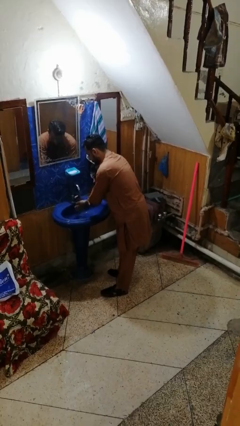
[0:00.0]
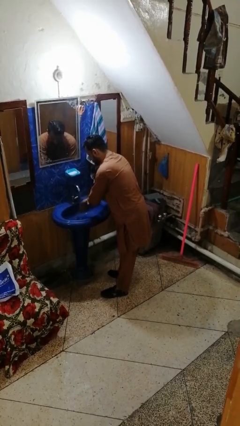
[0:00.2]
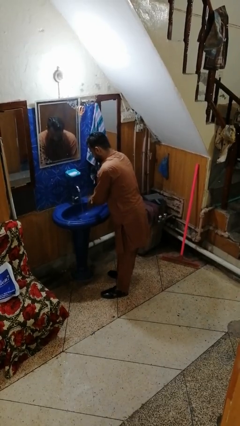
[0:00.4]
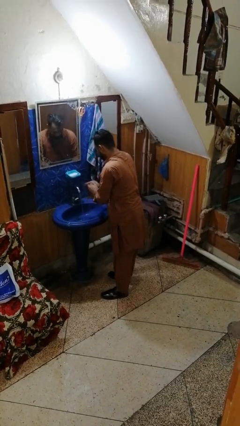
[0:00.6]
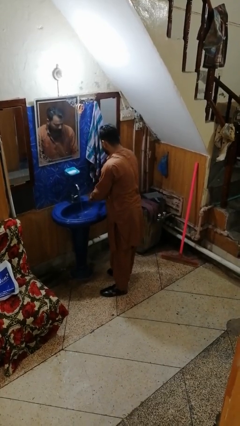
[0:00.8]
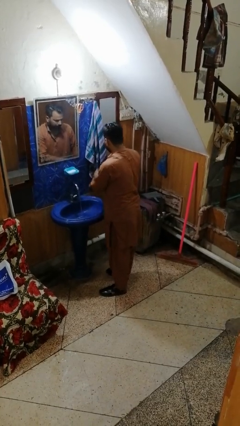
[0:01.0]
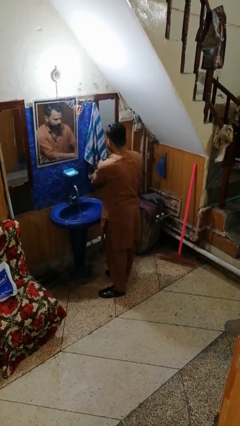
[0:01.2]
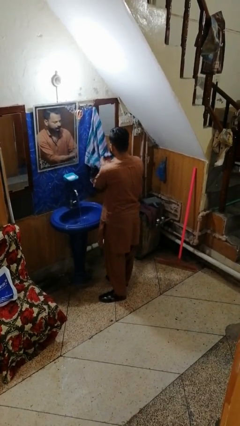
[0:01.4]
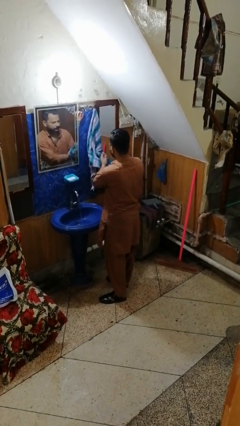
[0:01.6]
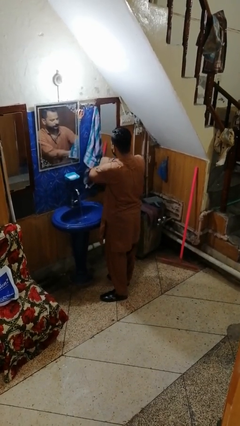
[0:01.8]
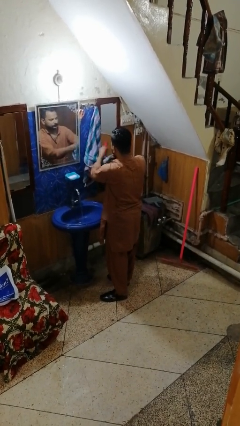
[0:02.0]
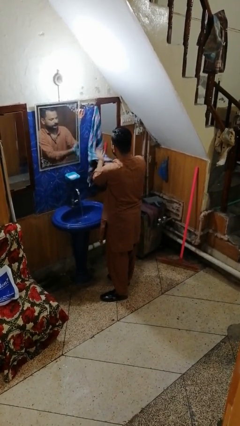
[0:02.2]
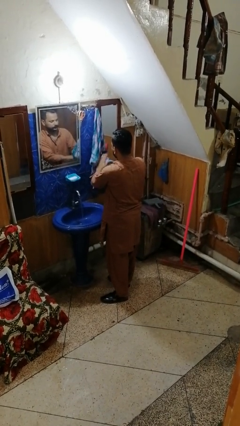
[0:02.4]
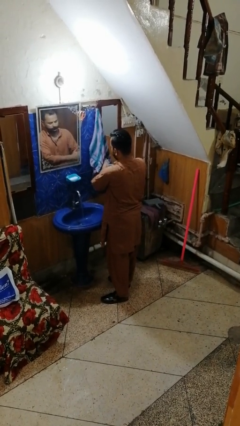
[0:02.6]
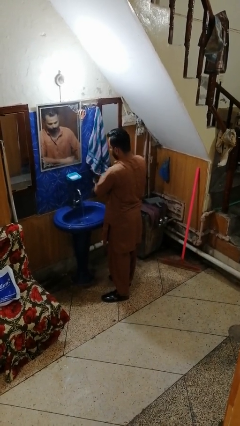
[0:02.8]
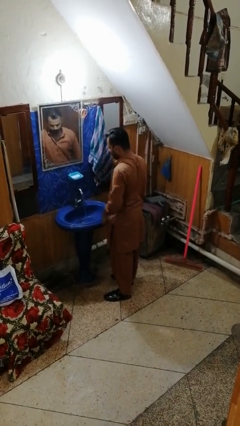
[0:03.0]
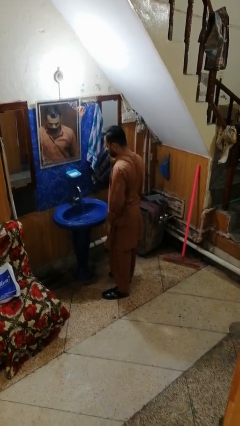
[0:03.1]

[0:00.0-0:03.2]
person dries hands with towel

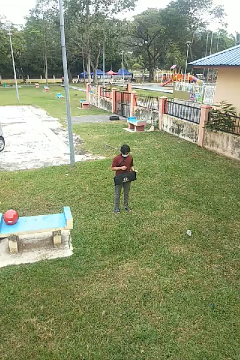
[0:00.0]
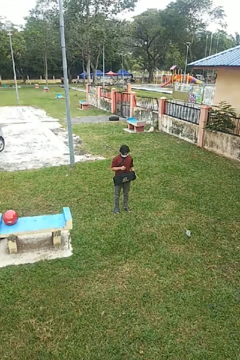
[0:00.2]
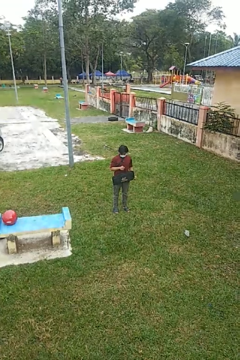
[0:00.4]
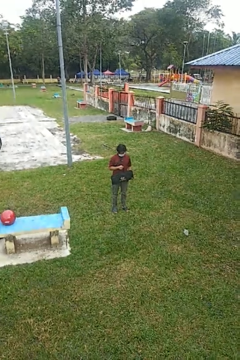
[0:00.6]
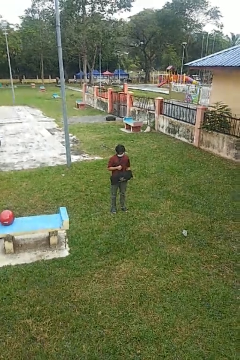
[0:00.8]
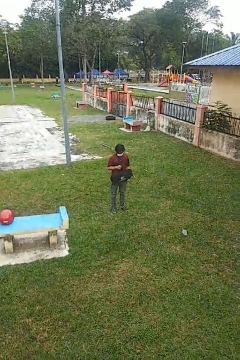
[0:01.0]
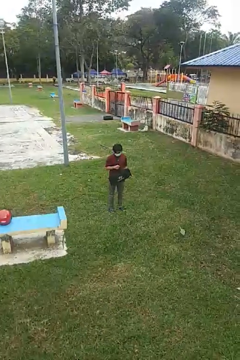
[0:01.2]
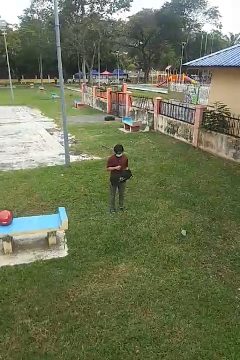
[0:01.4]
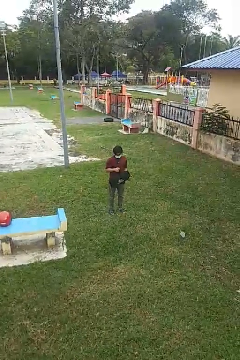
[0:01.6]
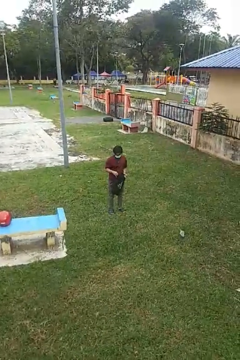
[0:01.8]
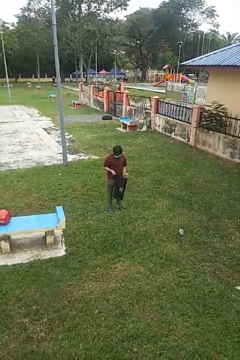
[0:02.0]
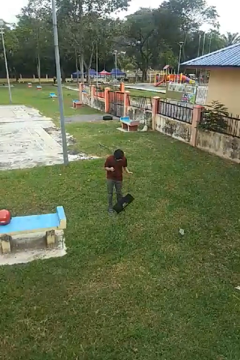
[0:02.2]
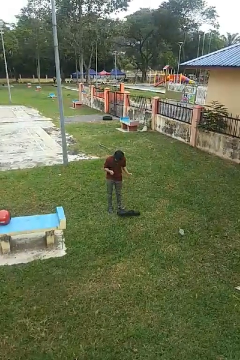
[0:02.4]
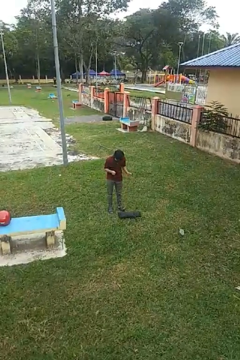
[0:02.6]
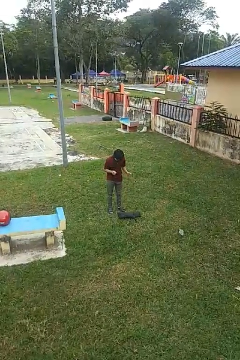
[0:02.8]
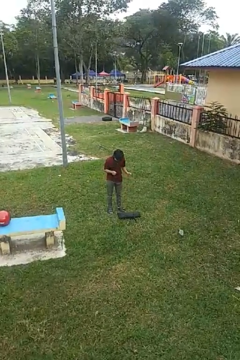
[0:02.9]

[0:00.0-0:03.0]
person drops object

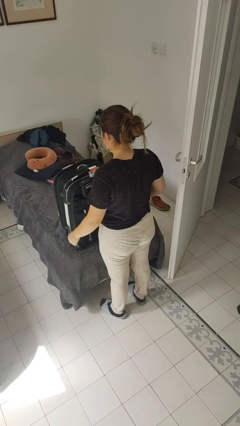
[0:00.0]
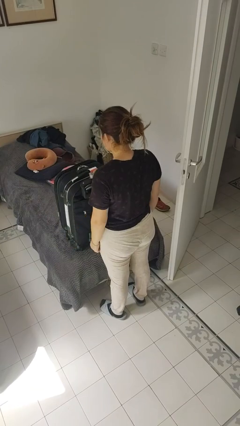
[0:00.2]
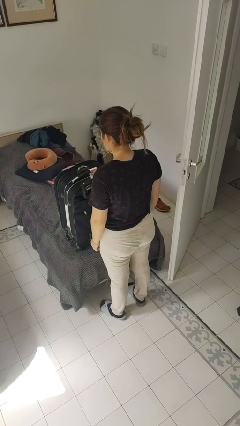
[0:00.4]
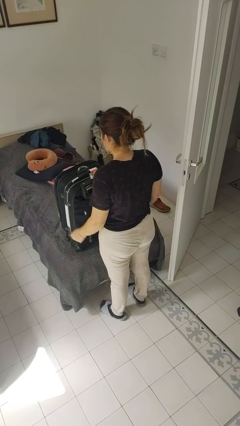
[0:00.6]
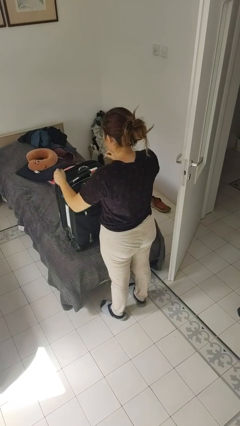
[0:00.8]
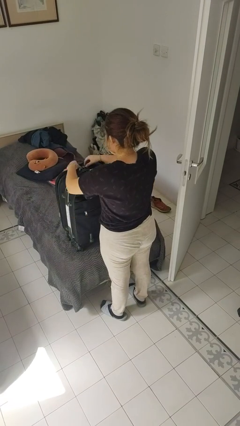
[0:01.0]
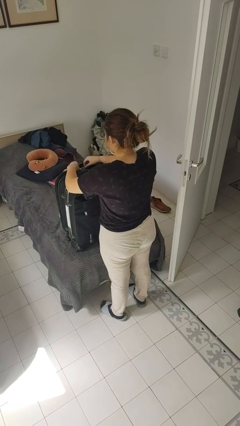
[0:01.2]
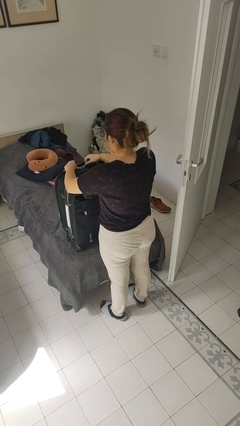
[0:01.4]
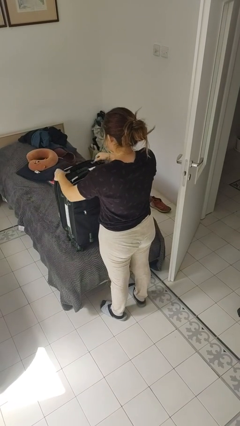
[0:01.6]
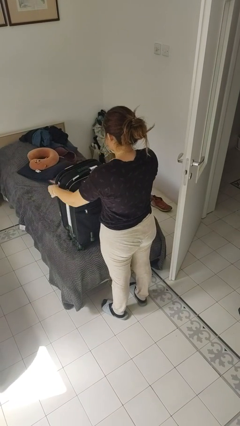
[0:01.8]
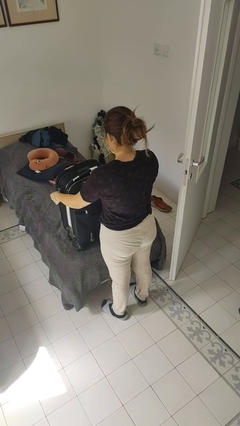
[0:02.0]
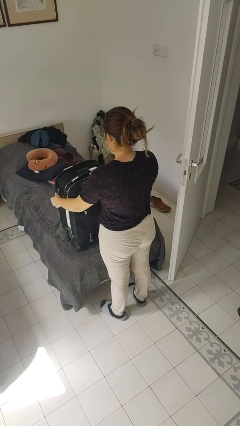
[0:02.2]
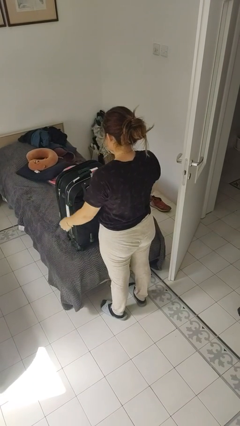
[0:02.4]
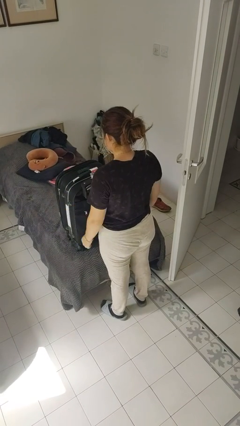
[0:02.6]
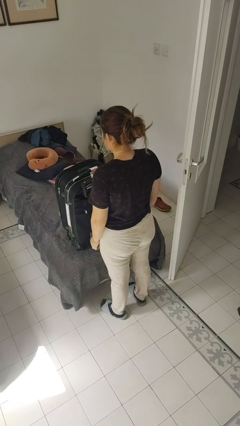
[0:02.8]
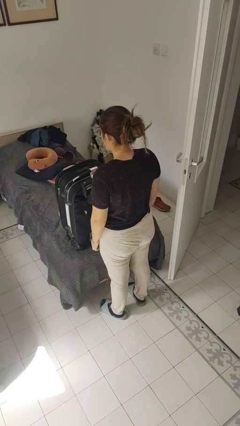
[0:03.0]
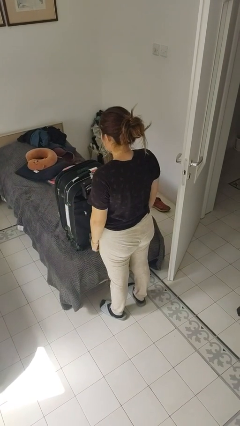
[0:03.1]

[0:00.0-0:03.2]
person opens suitcase

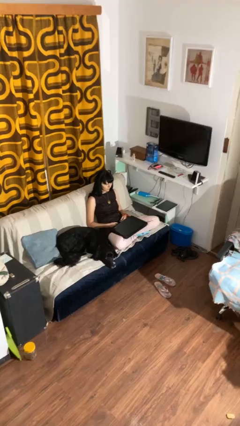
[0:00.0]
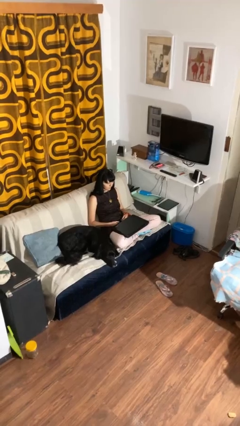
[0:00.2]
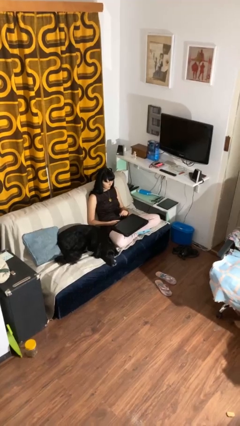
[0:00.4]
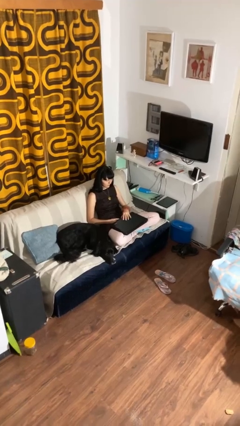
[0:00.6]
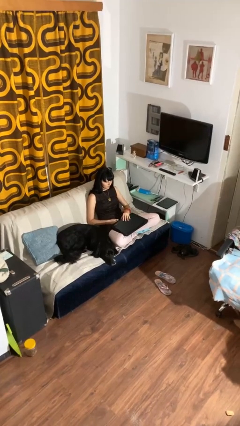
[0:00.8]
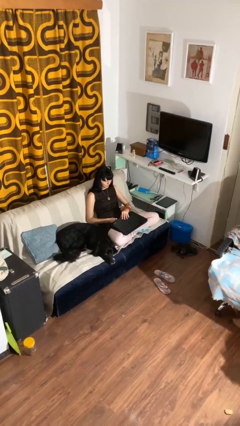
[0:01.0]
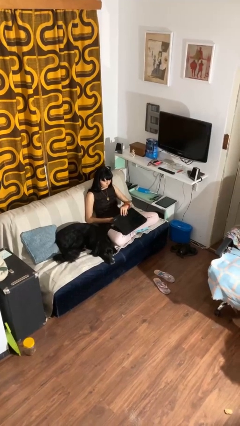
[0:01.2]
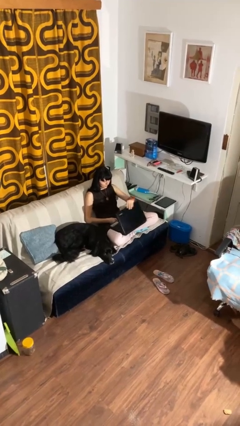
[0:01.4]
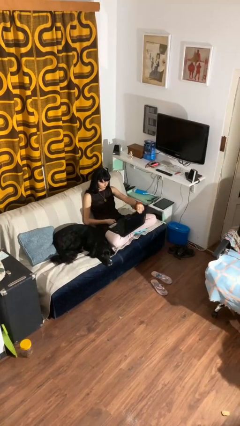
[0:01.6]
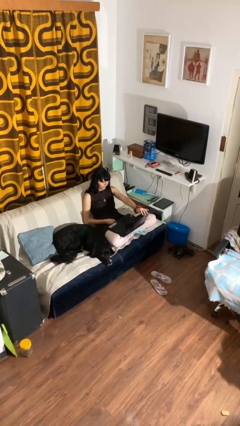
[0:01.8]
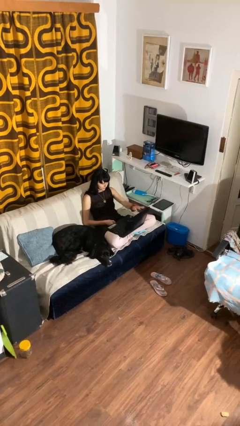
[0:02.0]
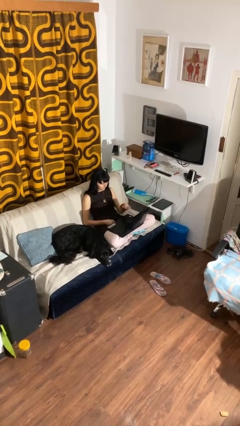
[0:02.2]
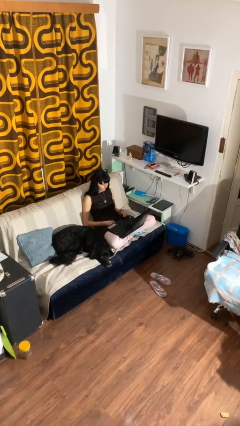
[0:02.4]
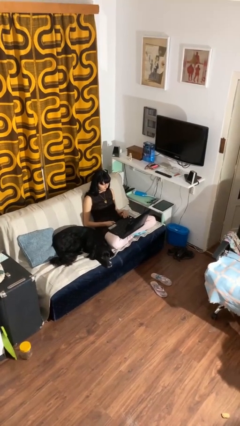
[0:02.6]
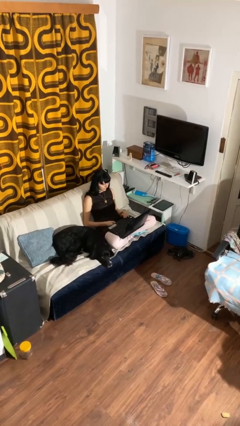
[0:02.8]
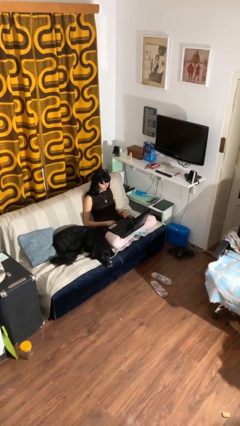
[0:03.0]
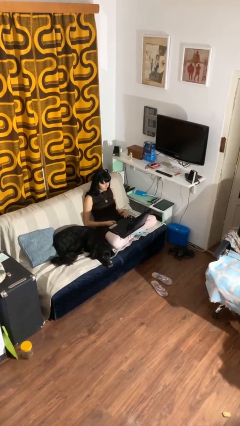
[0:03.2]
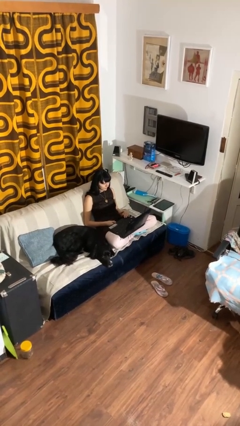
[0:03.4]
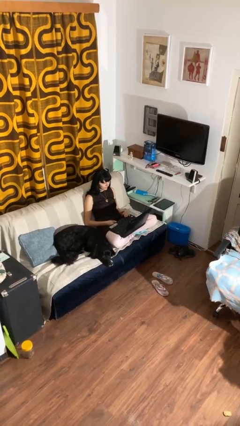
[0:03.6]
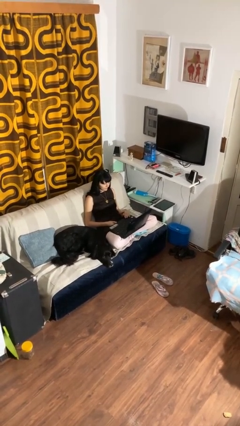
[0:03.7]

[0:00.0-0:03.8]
person opens laptop

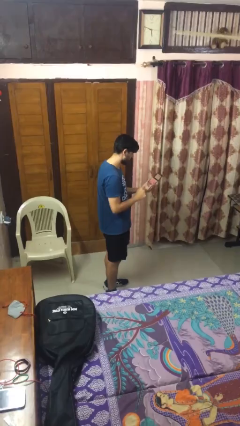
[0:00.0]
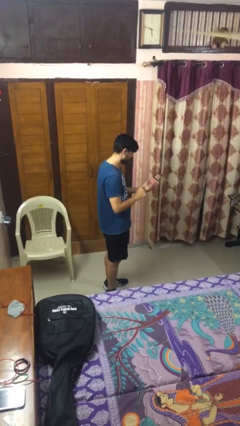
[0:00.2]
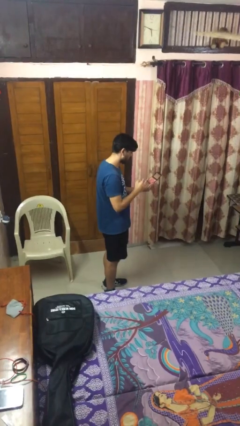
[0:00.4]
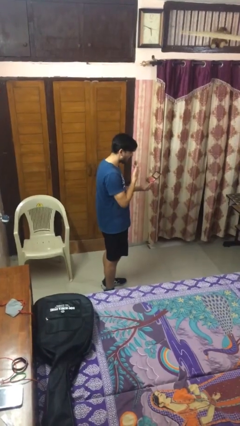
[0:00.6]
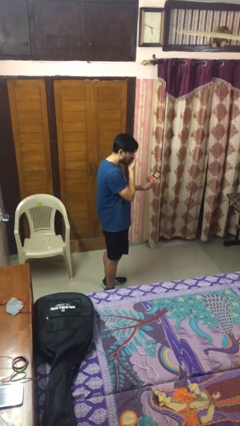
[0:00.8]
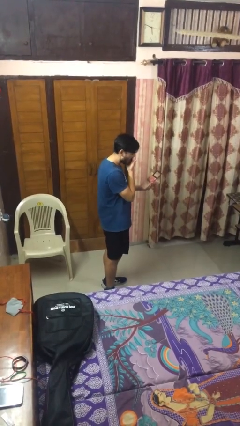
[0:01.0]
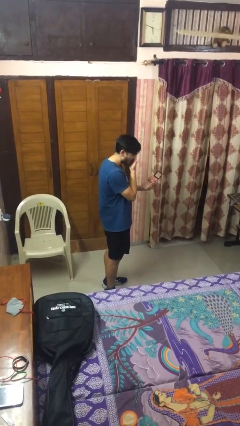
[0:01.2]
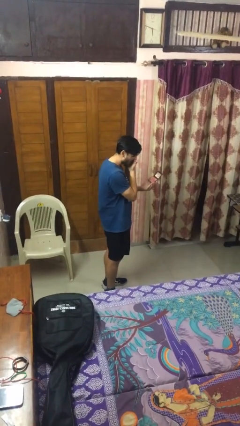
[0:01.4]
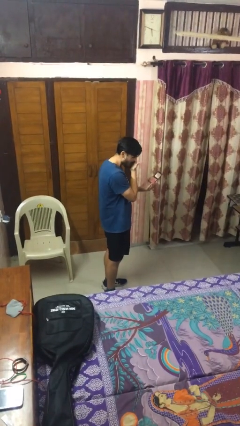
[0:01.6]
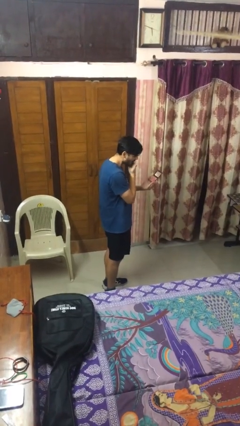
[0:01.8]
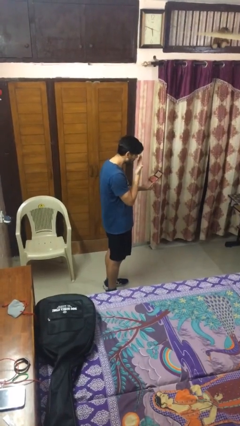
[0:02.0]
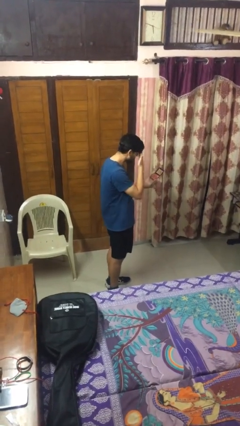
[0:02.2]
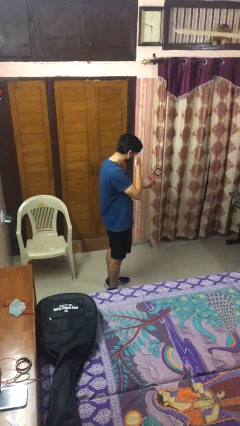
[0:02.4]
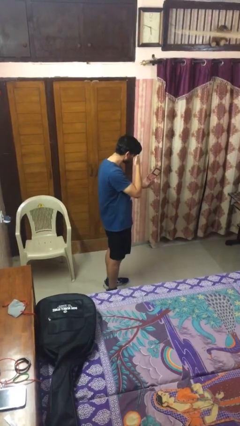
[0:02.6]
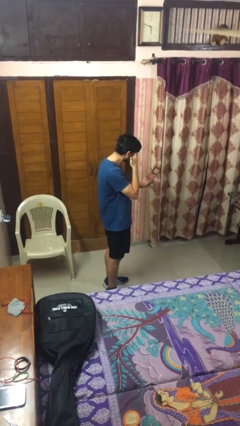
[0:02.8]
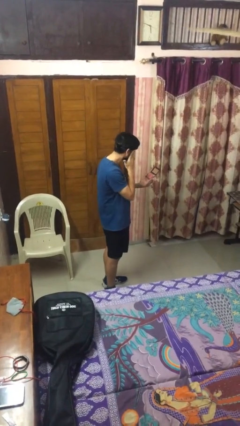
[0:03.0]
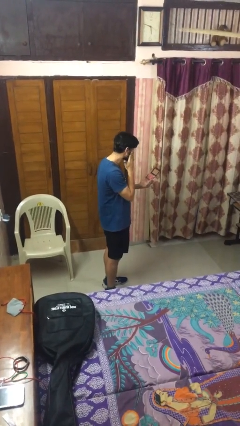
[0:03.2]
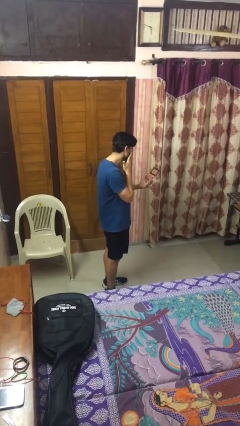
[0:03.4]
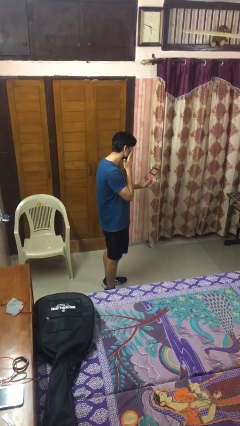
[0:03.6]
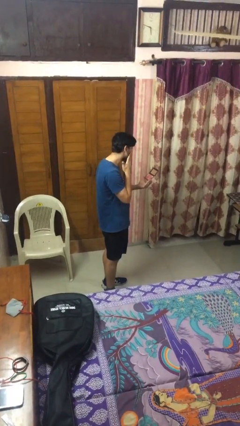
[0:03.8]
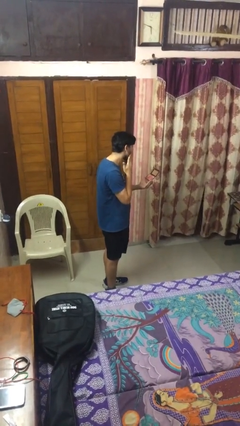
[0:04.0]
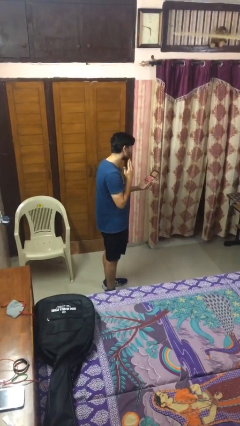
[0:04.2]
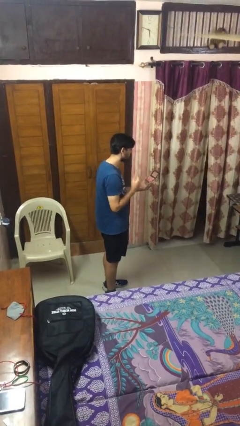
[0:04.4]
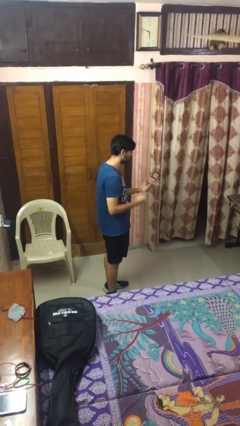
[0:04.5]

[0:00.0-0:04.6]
person applies foundation makeup

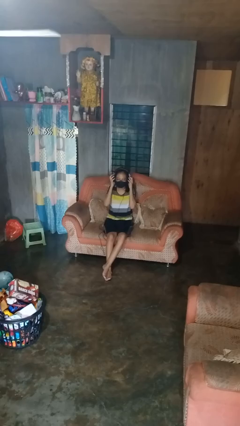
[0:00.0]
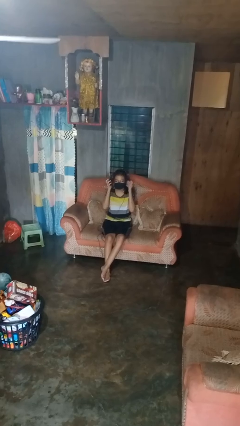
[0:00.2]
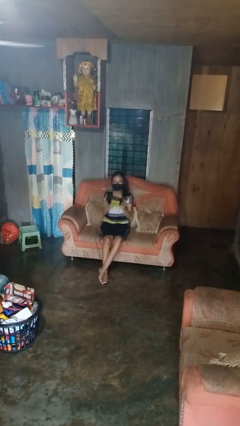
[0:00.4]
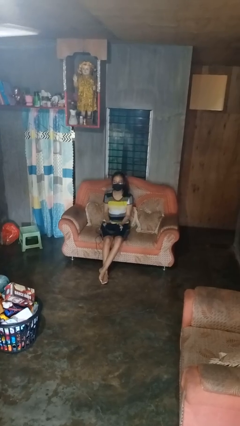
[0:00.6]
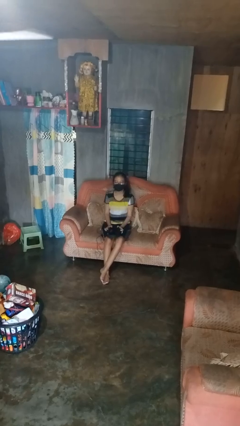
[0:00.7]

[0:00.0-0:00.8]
person takes off headphones
